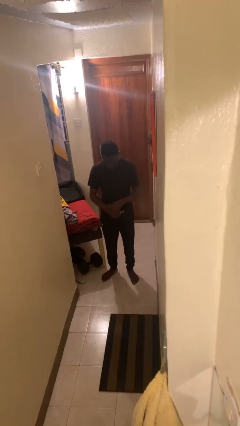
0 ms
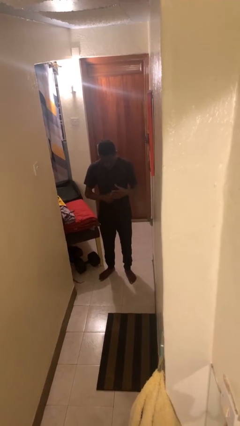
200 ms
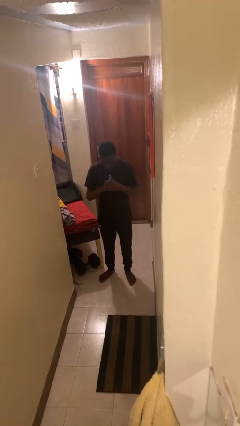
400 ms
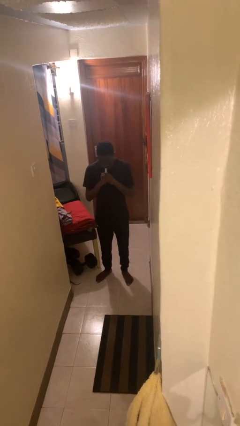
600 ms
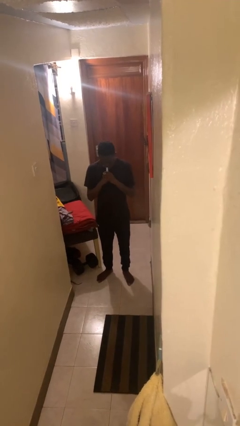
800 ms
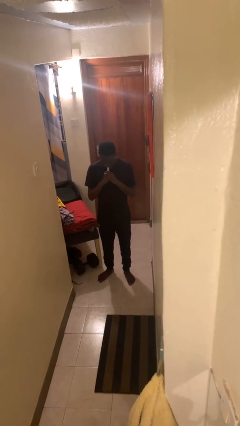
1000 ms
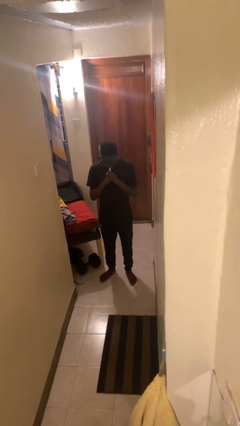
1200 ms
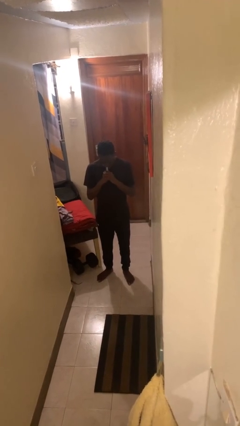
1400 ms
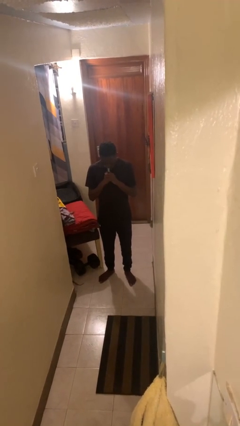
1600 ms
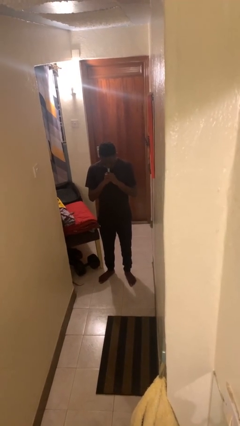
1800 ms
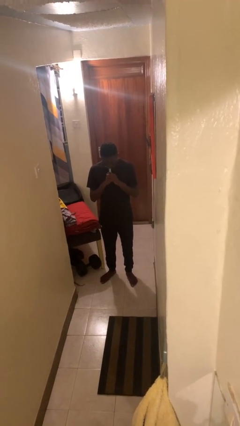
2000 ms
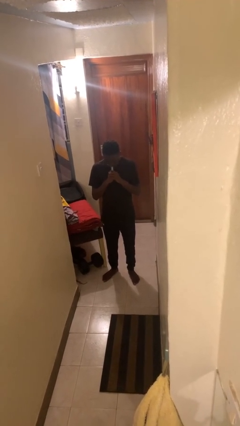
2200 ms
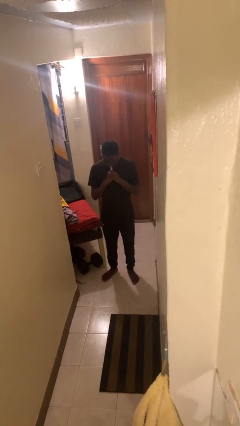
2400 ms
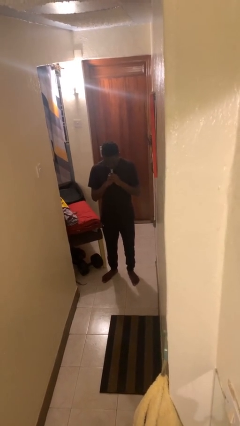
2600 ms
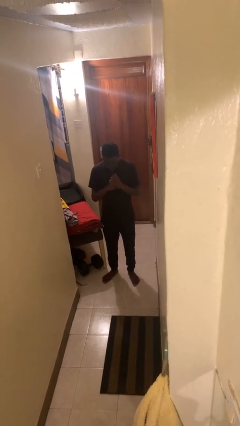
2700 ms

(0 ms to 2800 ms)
person vapes

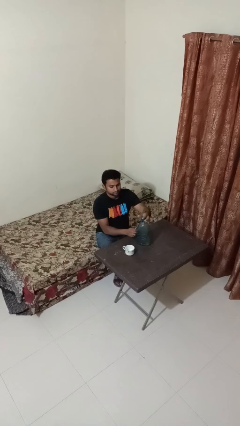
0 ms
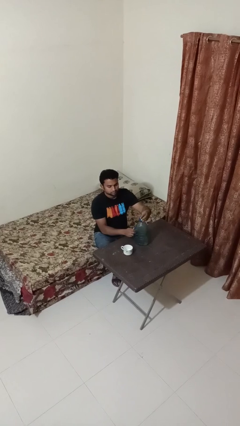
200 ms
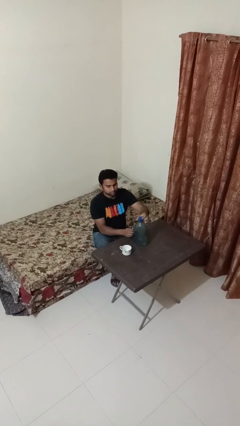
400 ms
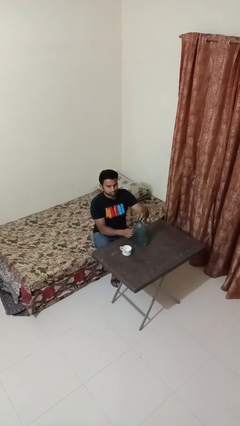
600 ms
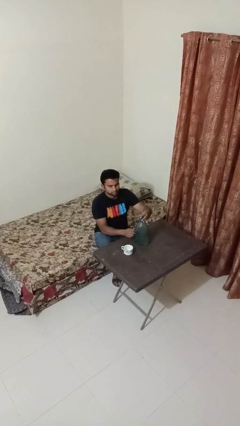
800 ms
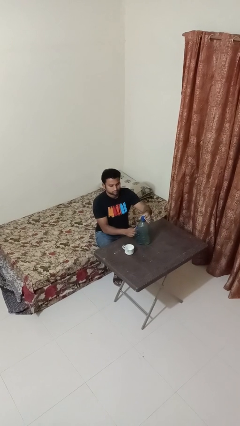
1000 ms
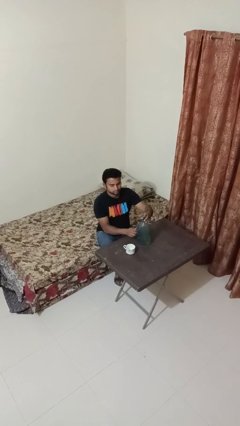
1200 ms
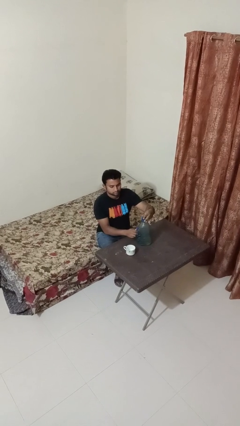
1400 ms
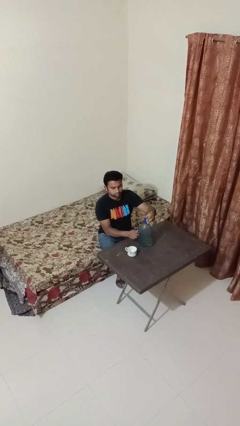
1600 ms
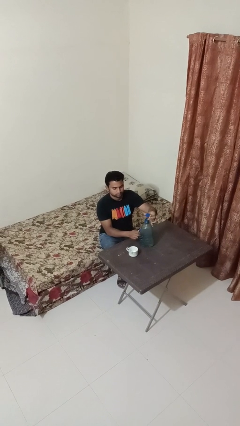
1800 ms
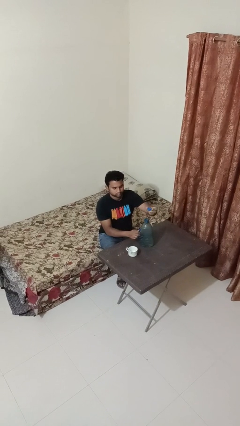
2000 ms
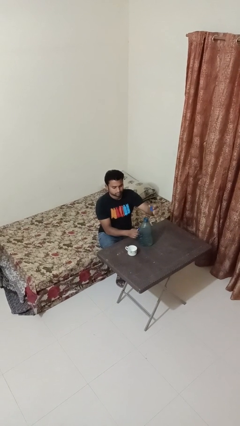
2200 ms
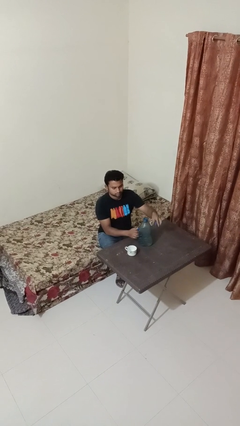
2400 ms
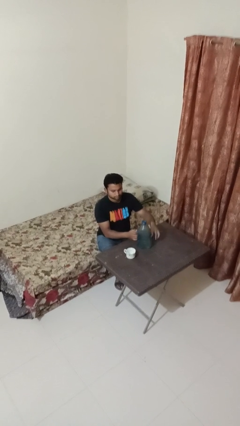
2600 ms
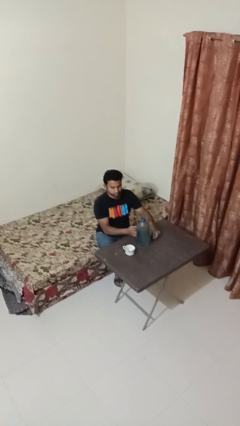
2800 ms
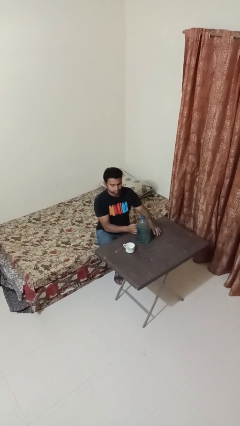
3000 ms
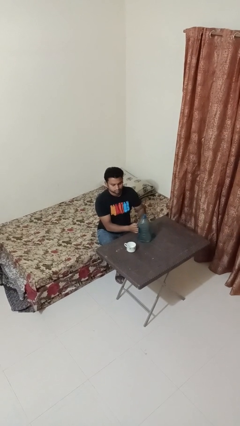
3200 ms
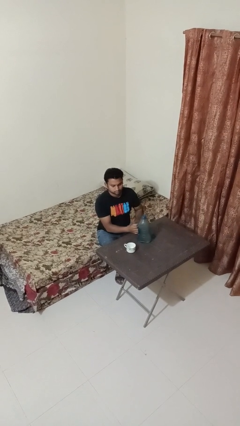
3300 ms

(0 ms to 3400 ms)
person unscrews lid from bottle

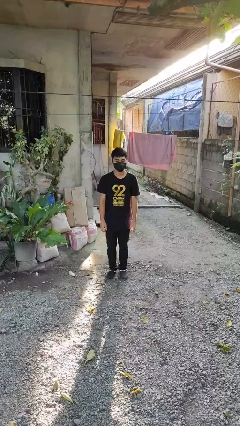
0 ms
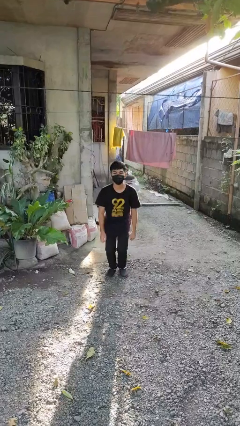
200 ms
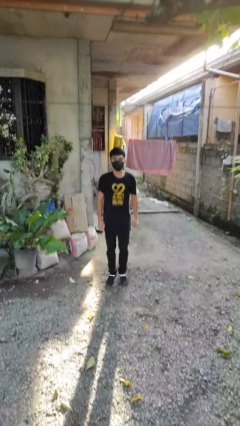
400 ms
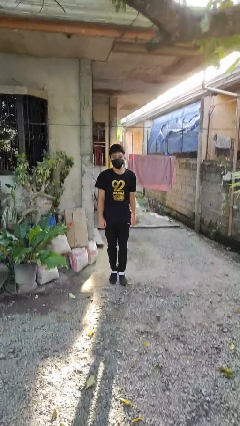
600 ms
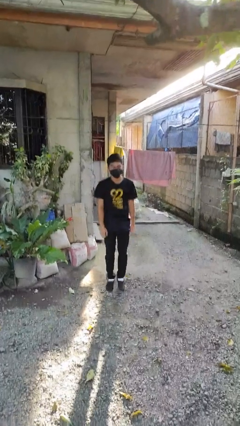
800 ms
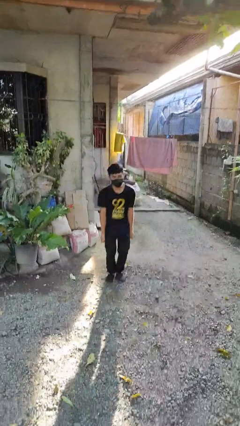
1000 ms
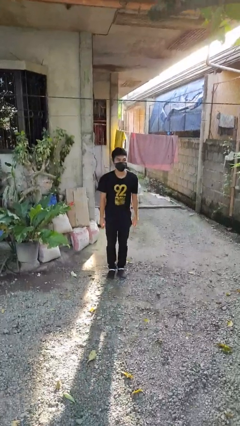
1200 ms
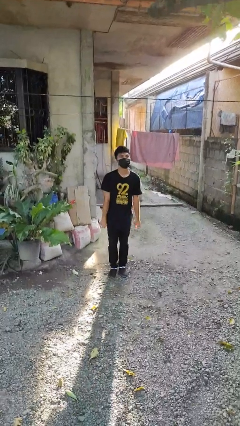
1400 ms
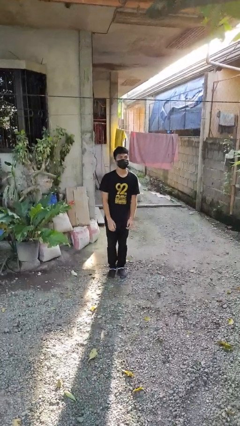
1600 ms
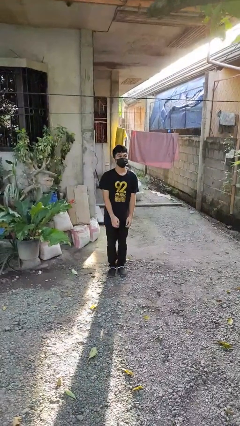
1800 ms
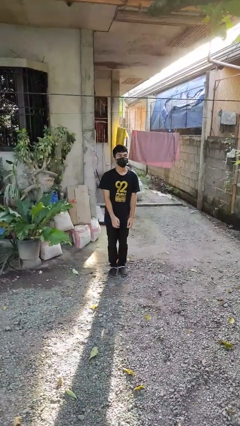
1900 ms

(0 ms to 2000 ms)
person jumps

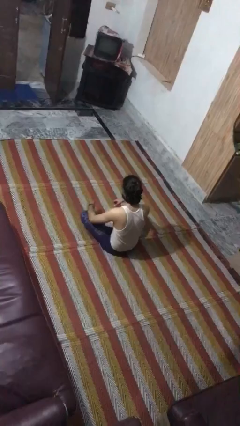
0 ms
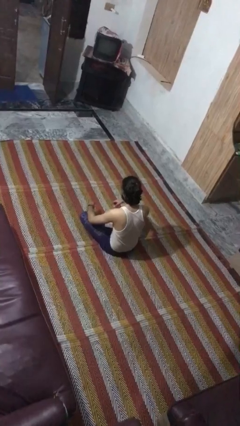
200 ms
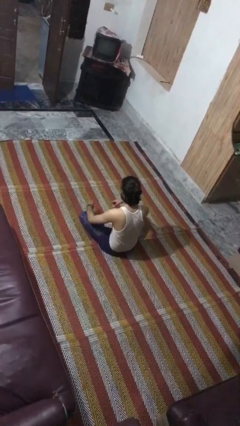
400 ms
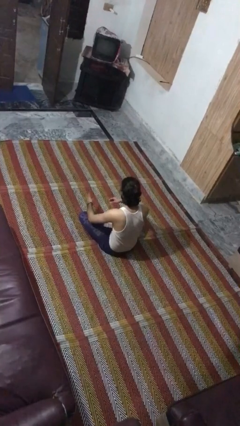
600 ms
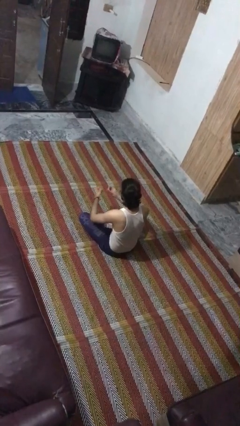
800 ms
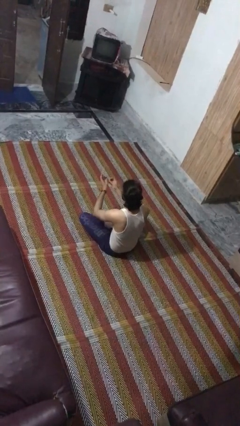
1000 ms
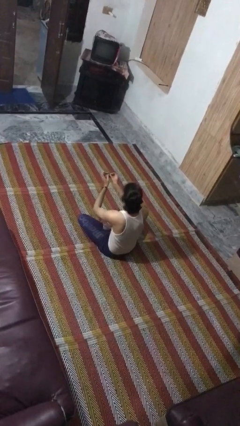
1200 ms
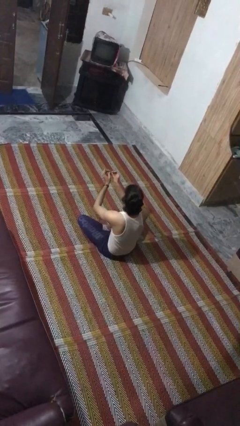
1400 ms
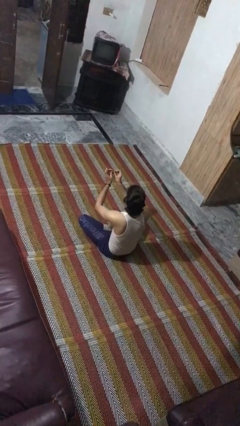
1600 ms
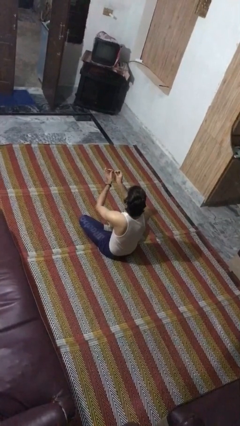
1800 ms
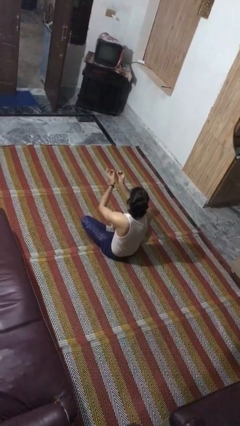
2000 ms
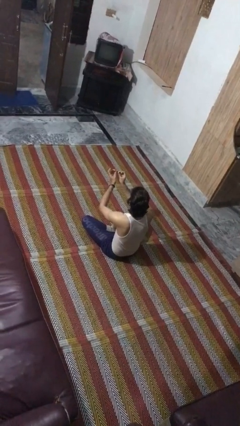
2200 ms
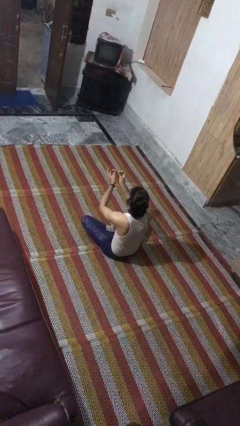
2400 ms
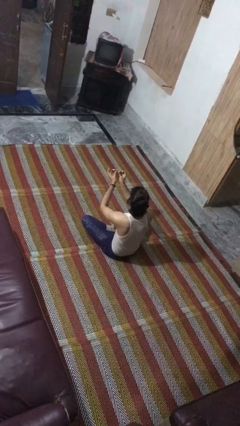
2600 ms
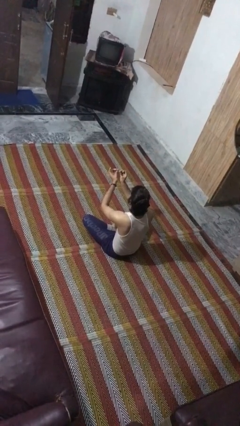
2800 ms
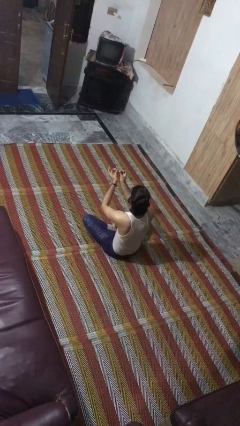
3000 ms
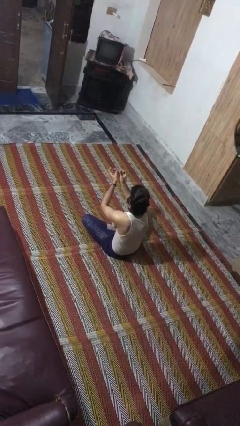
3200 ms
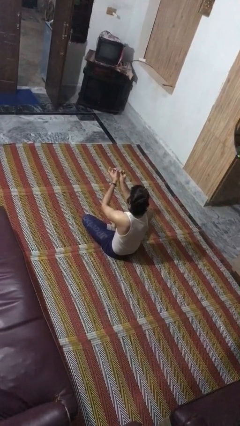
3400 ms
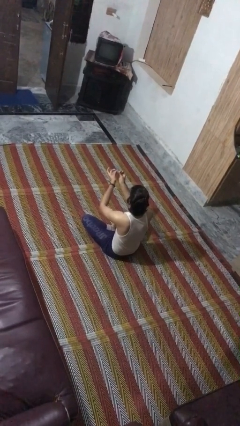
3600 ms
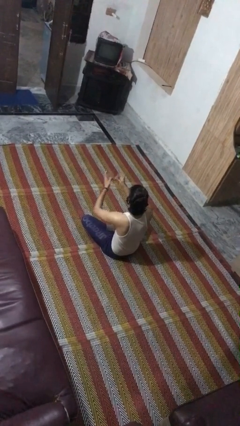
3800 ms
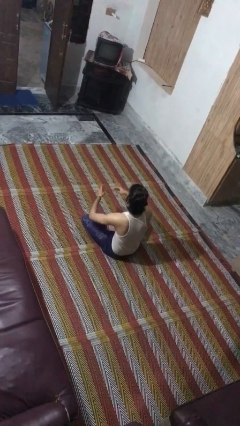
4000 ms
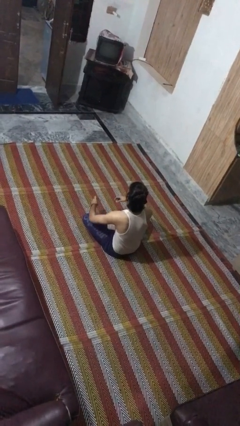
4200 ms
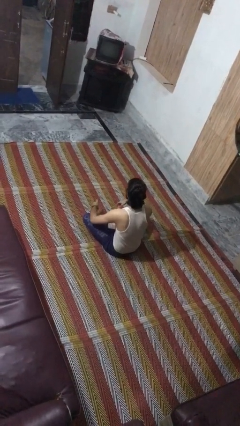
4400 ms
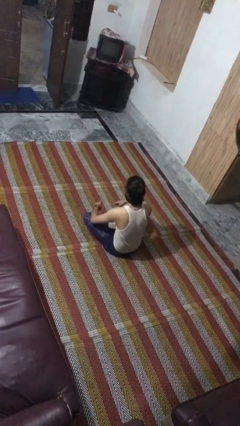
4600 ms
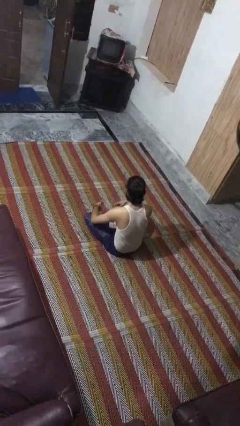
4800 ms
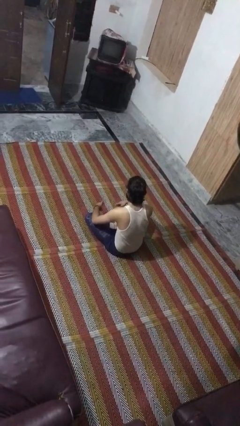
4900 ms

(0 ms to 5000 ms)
person clips fingernails

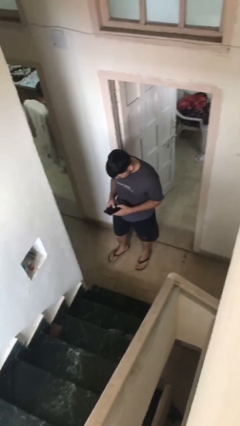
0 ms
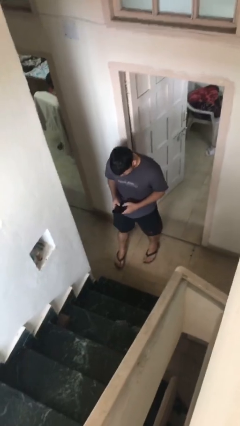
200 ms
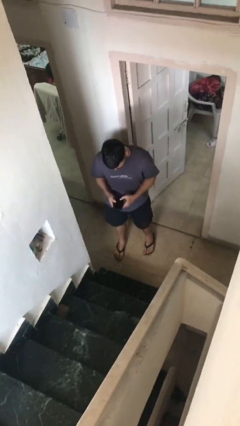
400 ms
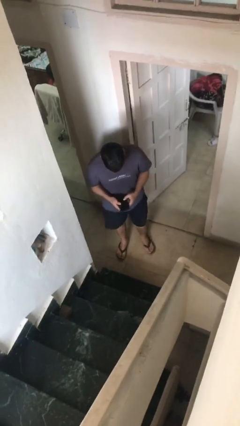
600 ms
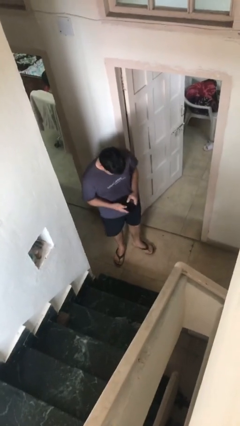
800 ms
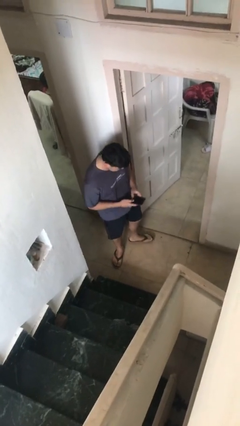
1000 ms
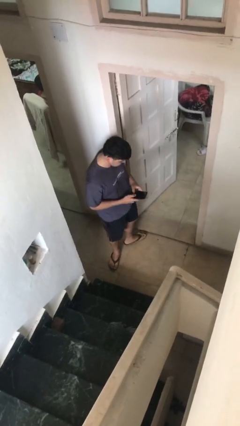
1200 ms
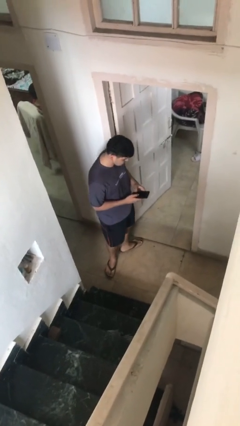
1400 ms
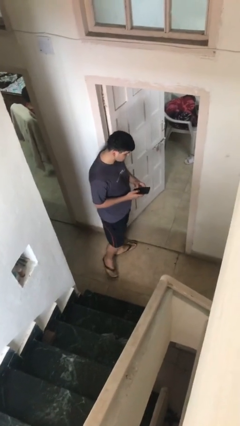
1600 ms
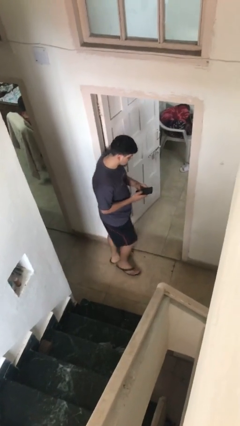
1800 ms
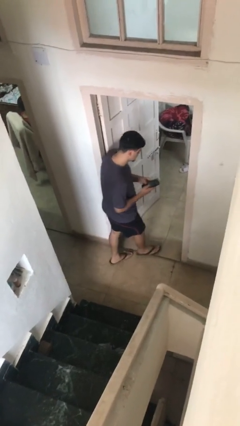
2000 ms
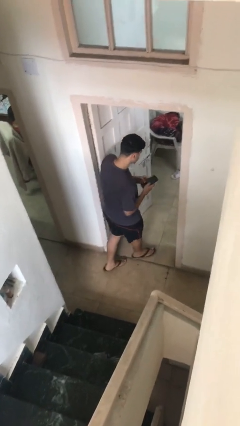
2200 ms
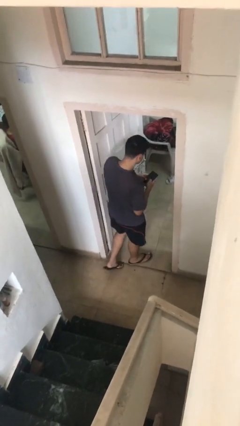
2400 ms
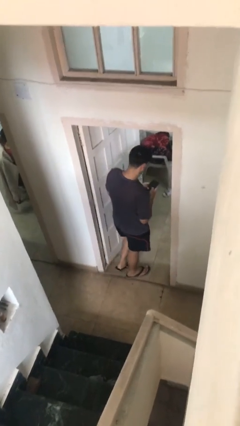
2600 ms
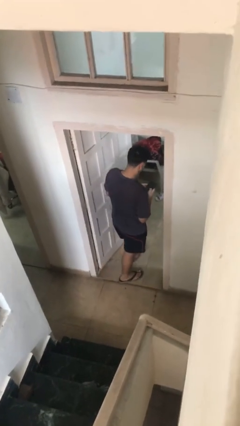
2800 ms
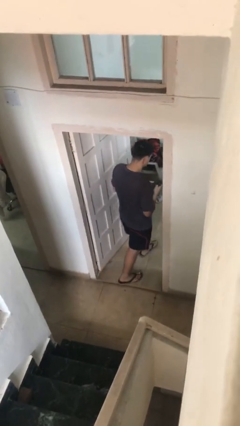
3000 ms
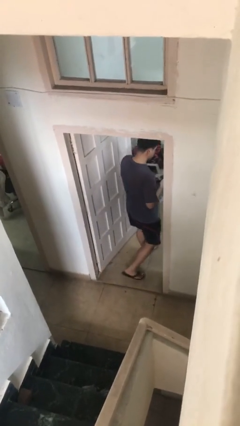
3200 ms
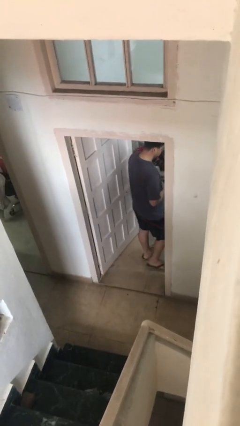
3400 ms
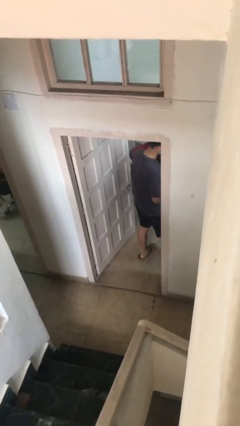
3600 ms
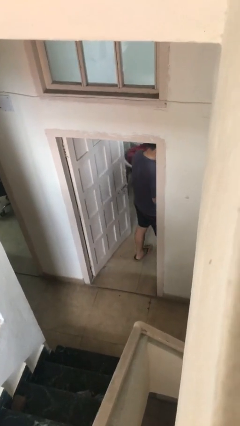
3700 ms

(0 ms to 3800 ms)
person exits scene through structure

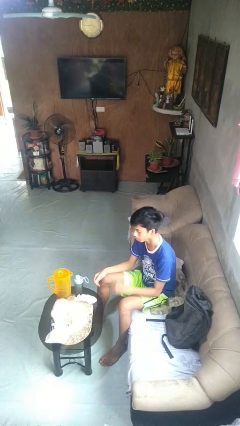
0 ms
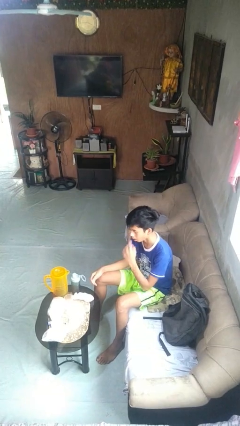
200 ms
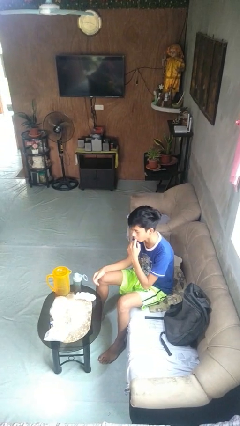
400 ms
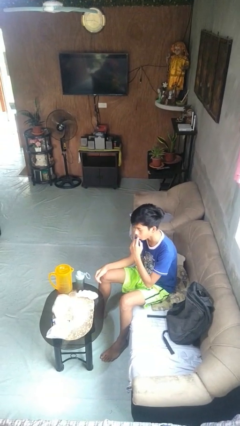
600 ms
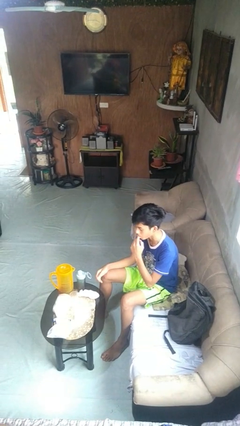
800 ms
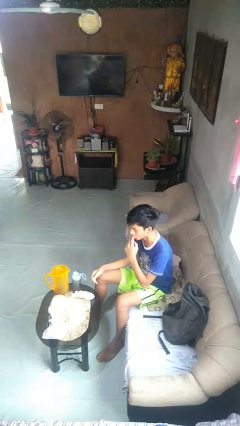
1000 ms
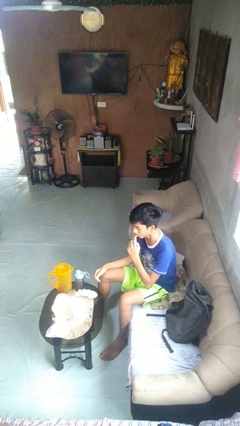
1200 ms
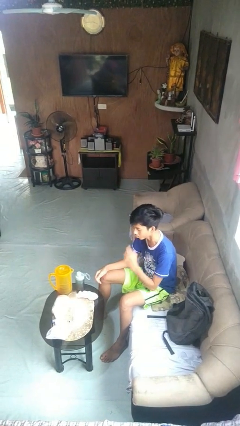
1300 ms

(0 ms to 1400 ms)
person licks fingers
